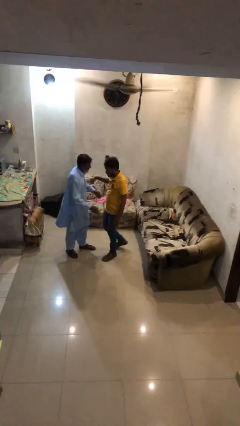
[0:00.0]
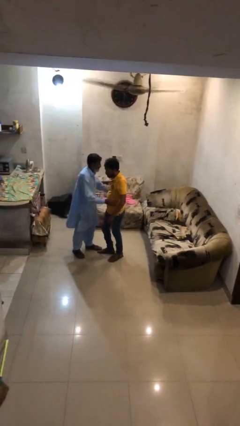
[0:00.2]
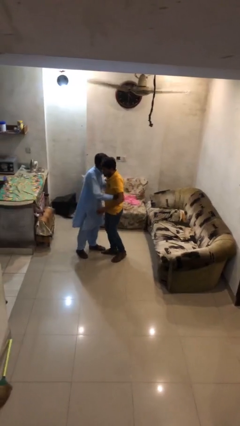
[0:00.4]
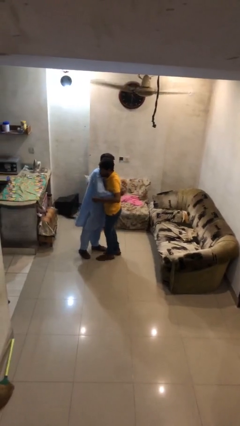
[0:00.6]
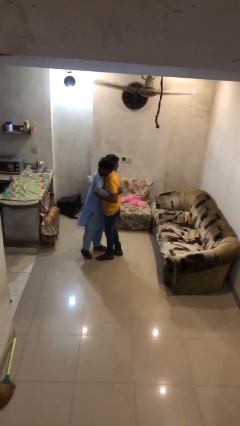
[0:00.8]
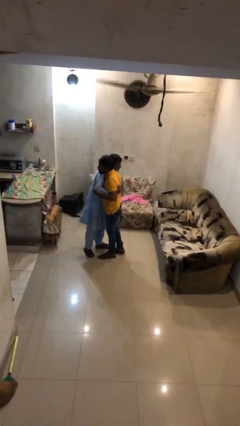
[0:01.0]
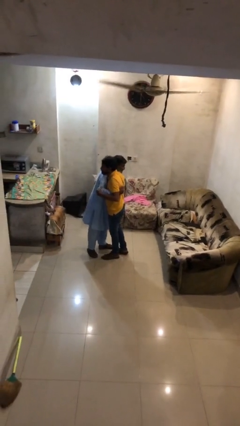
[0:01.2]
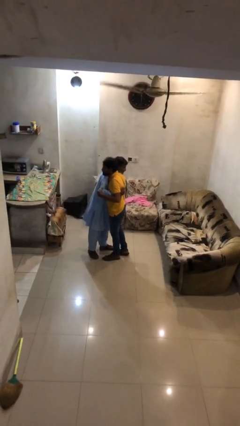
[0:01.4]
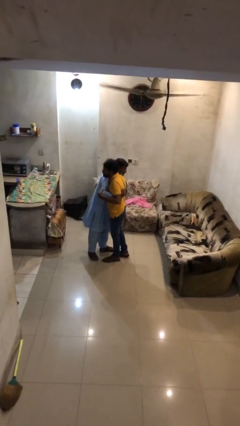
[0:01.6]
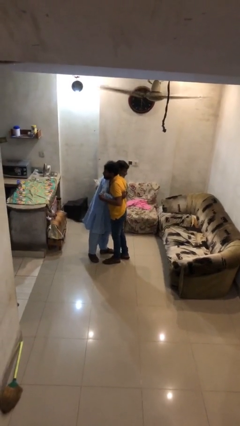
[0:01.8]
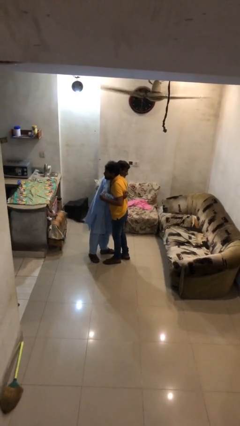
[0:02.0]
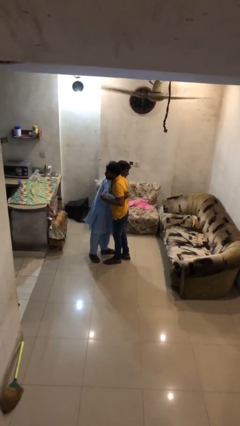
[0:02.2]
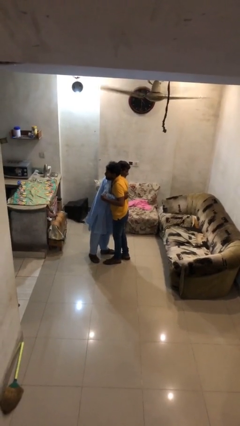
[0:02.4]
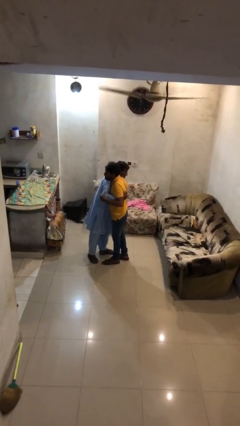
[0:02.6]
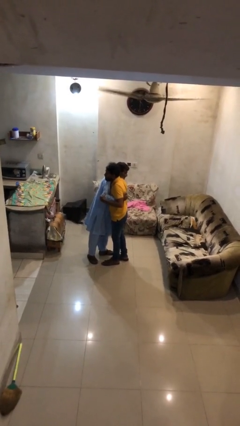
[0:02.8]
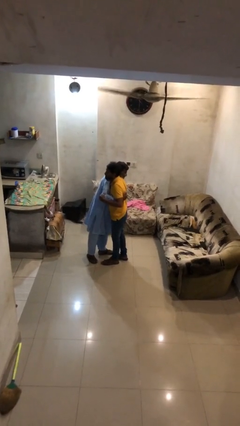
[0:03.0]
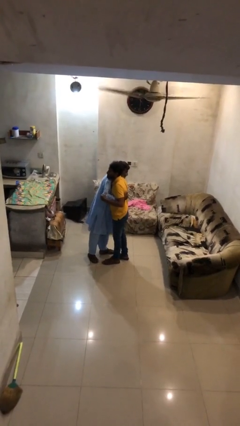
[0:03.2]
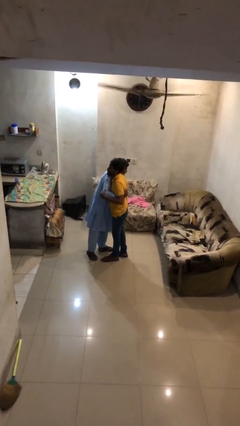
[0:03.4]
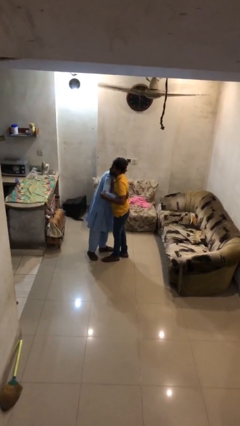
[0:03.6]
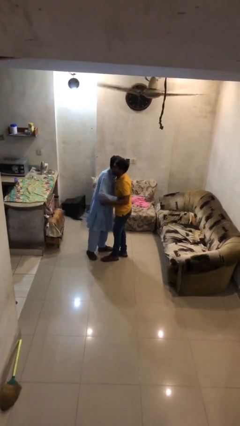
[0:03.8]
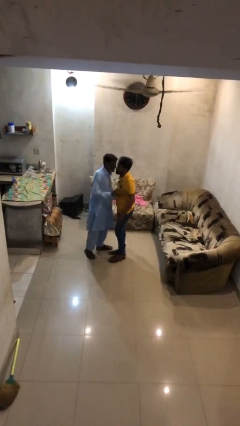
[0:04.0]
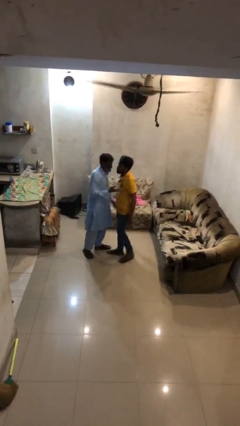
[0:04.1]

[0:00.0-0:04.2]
person embraces person

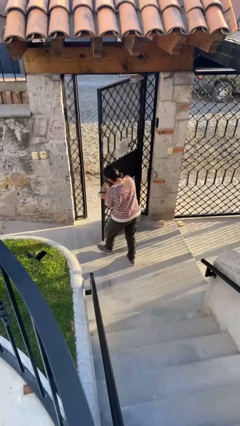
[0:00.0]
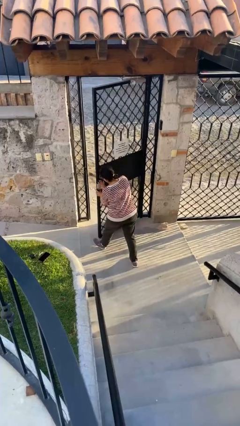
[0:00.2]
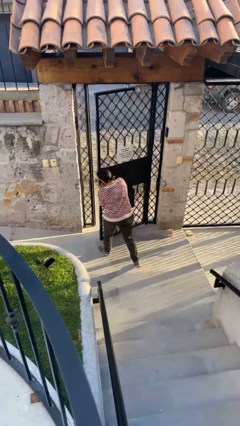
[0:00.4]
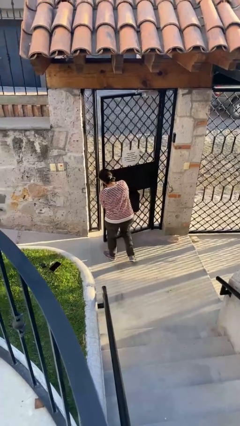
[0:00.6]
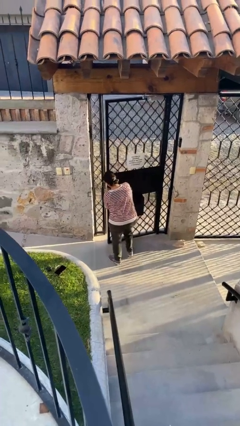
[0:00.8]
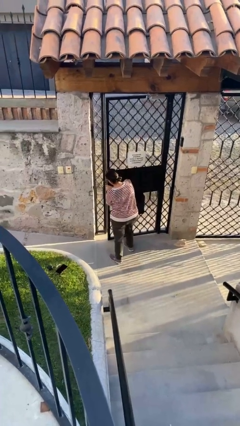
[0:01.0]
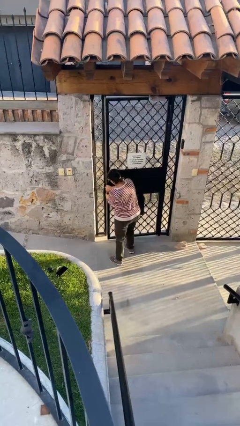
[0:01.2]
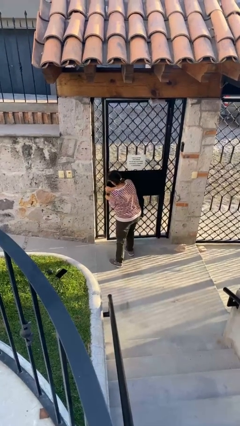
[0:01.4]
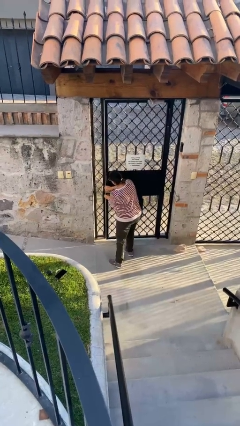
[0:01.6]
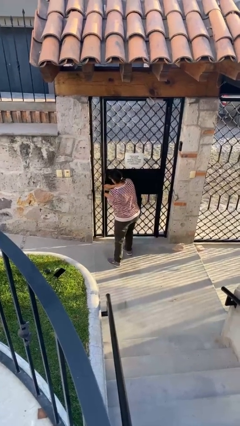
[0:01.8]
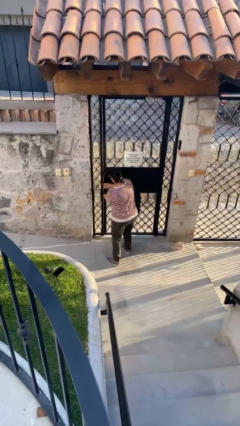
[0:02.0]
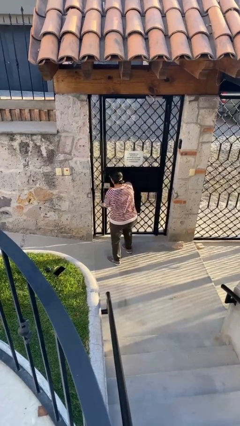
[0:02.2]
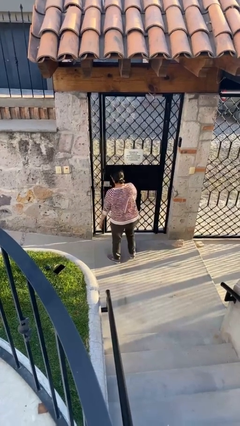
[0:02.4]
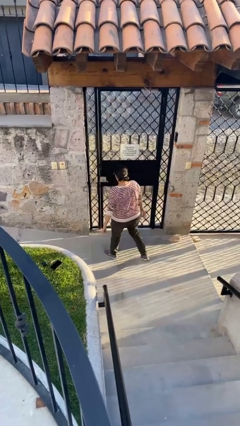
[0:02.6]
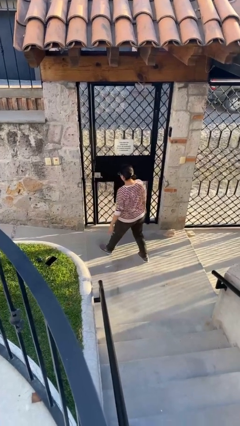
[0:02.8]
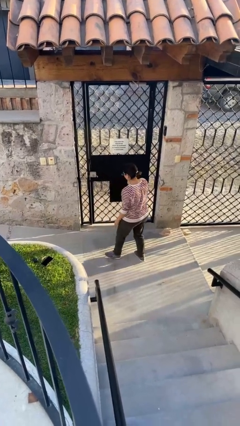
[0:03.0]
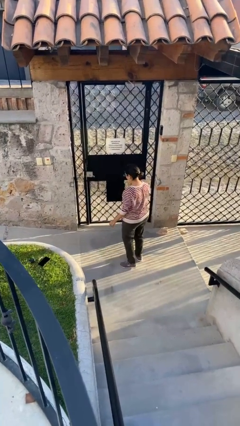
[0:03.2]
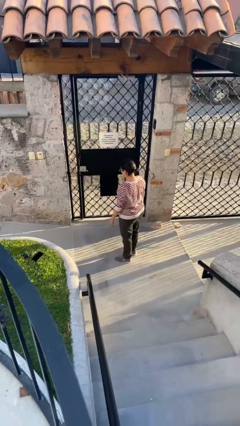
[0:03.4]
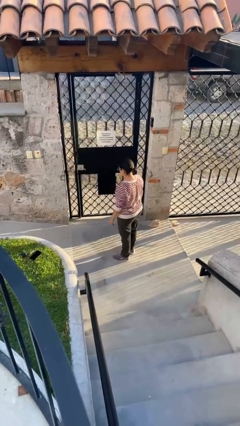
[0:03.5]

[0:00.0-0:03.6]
person closes facility door

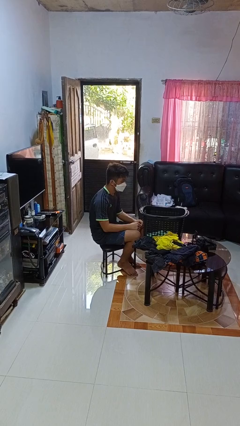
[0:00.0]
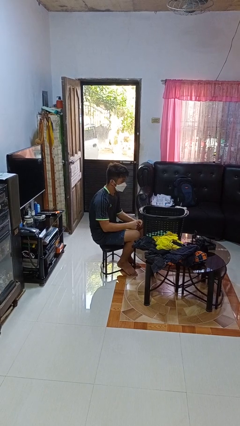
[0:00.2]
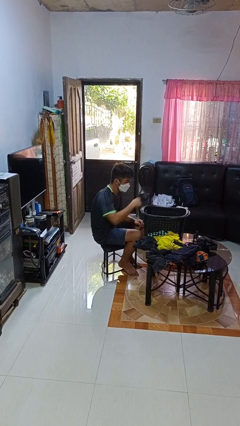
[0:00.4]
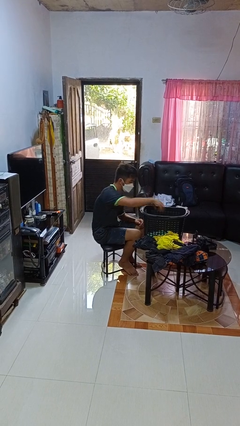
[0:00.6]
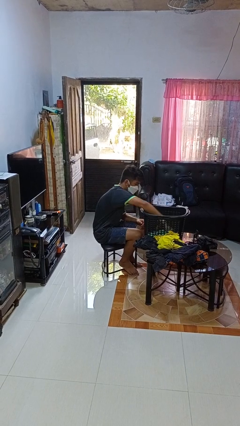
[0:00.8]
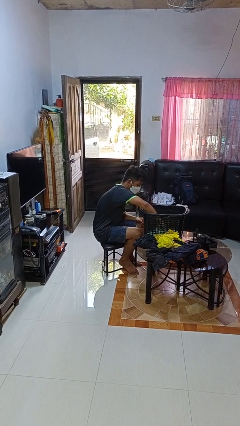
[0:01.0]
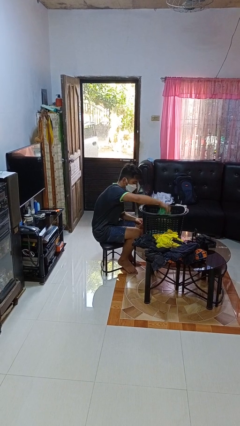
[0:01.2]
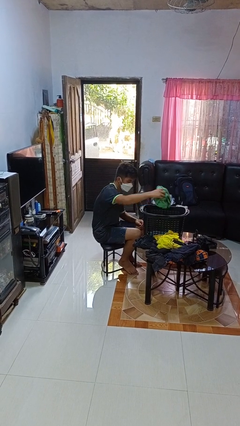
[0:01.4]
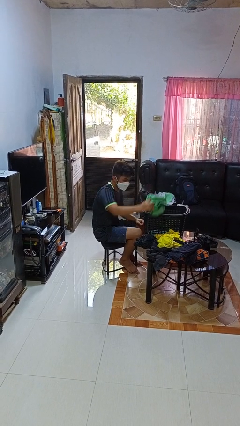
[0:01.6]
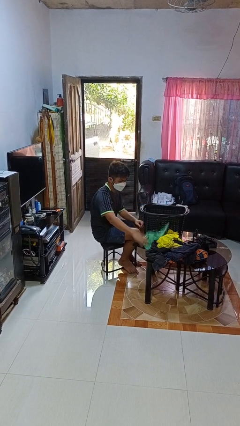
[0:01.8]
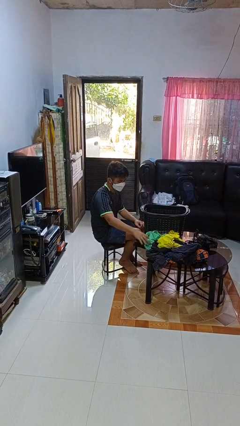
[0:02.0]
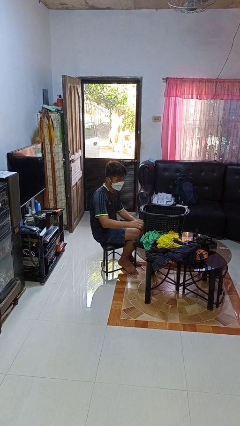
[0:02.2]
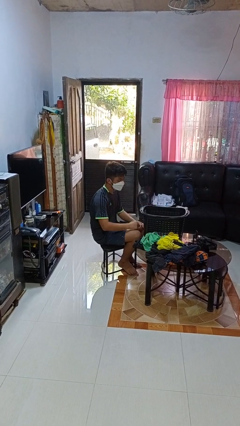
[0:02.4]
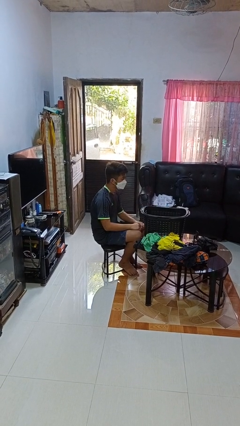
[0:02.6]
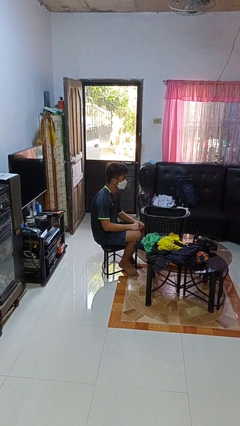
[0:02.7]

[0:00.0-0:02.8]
person takes object from basket

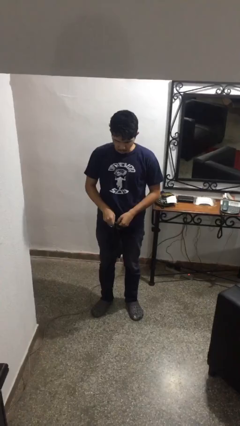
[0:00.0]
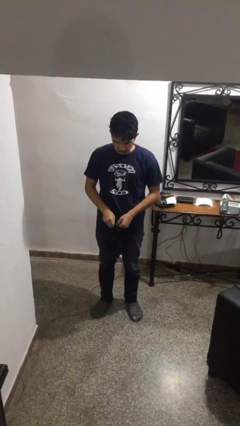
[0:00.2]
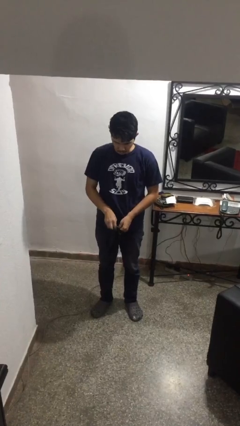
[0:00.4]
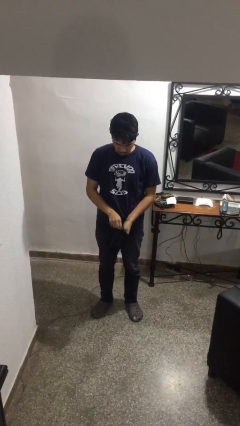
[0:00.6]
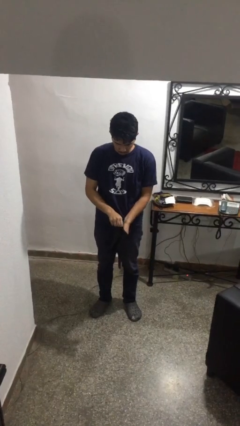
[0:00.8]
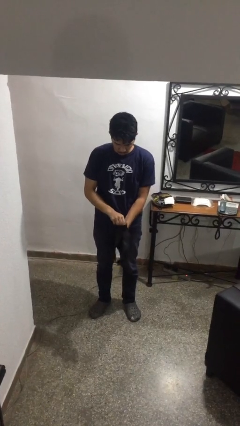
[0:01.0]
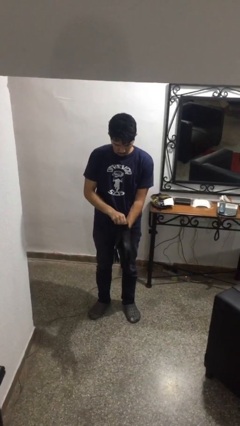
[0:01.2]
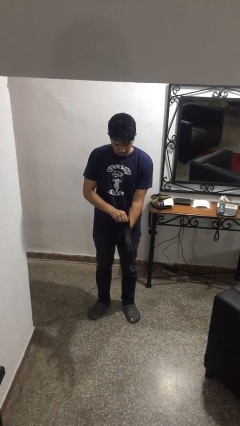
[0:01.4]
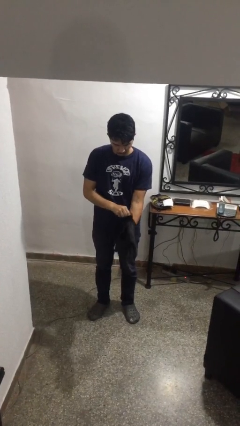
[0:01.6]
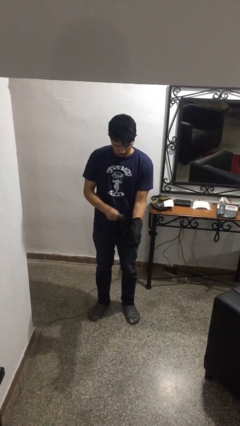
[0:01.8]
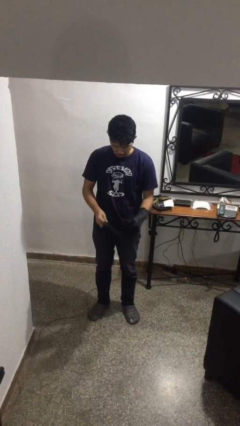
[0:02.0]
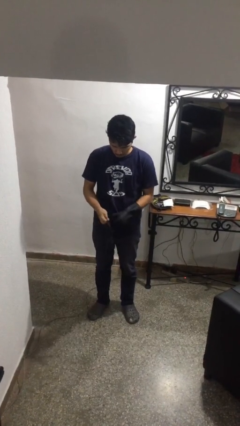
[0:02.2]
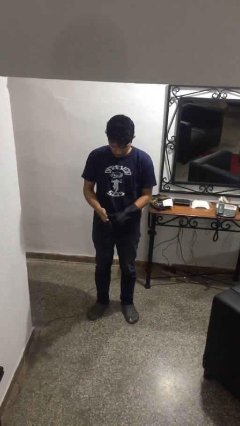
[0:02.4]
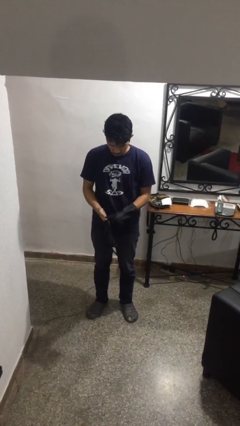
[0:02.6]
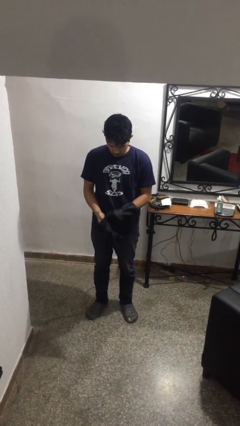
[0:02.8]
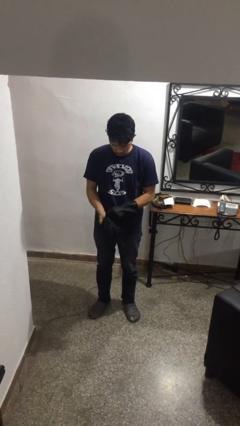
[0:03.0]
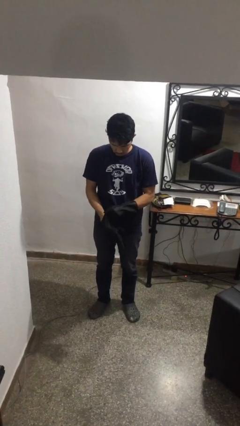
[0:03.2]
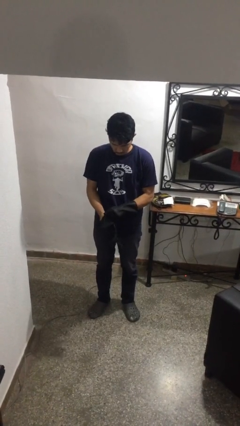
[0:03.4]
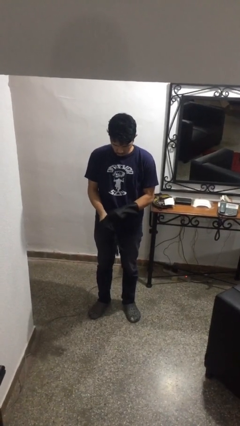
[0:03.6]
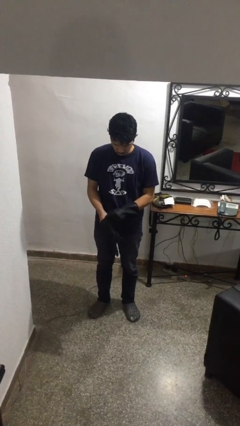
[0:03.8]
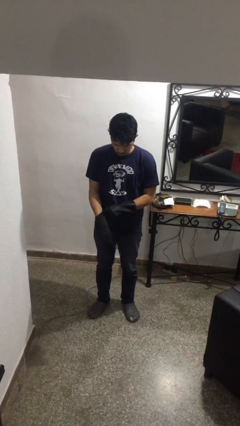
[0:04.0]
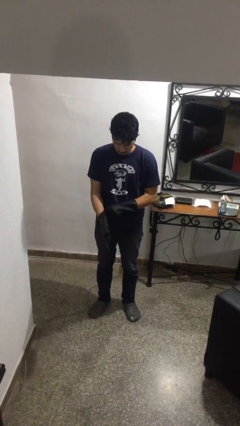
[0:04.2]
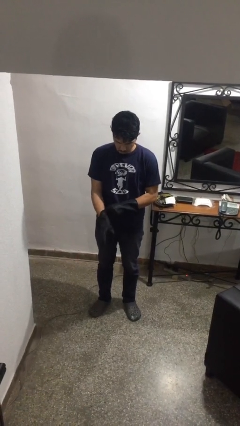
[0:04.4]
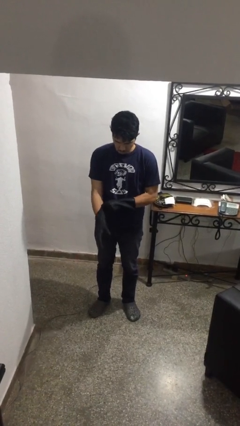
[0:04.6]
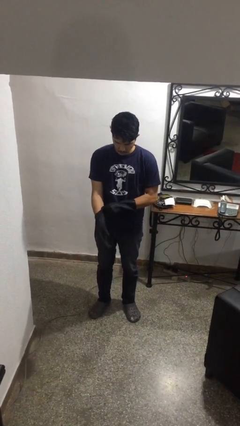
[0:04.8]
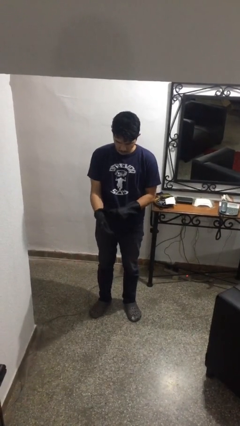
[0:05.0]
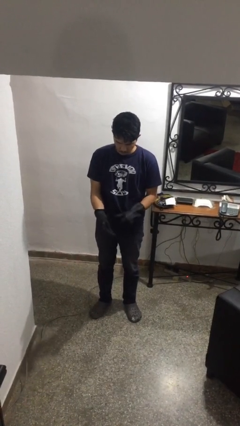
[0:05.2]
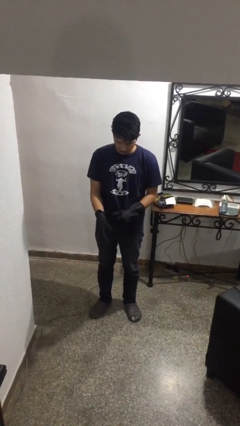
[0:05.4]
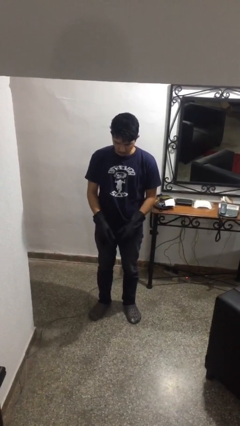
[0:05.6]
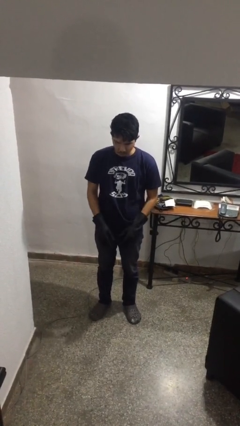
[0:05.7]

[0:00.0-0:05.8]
person puts on gloves

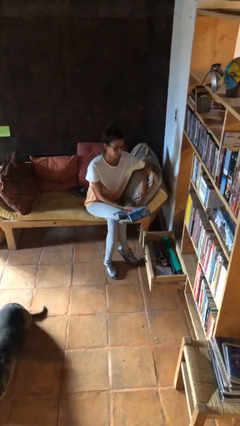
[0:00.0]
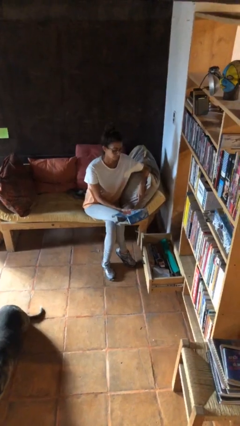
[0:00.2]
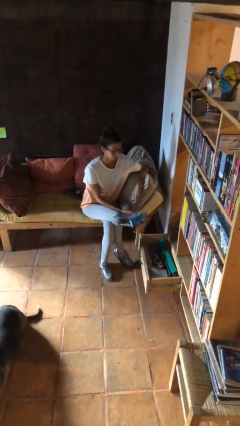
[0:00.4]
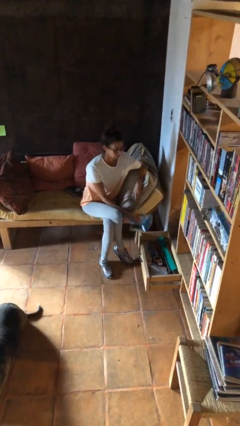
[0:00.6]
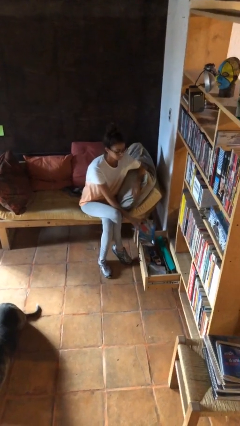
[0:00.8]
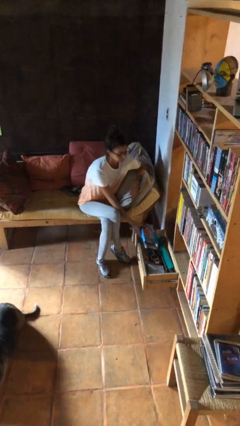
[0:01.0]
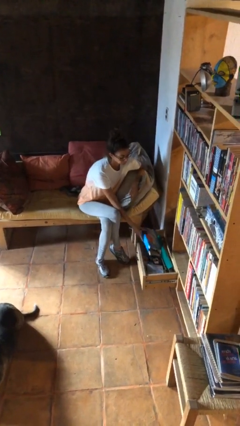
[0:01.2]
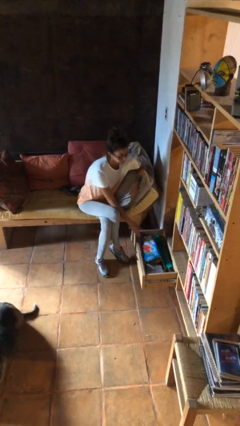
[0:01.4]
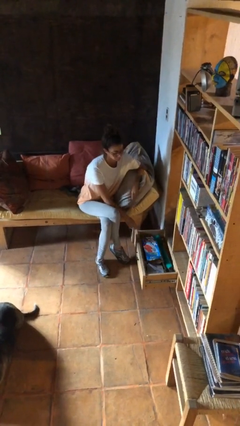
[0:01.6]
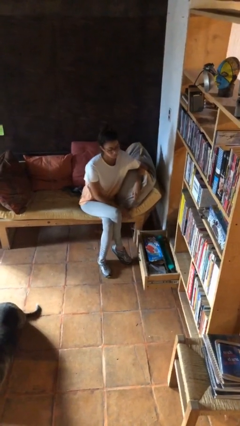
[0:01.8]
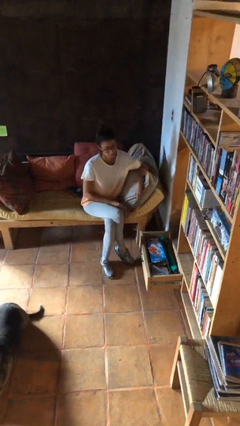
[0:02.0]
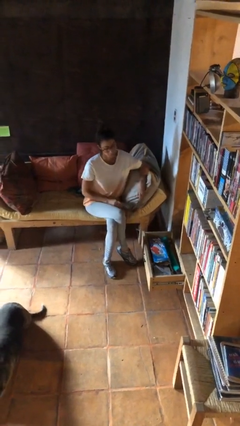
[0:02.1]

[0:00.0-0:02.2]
person puts down object into cabinet
